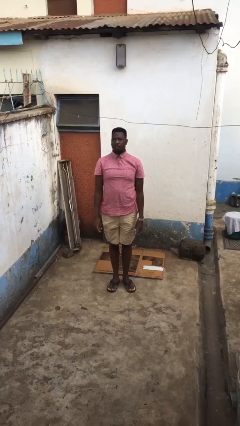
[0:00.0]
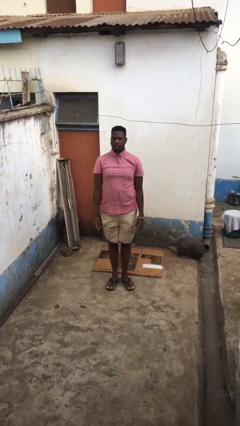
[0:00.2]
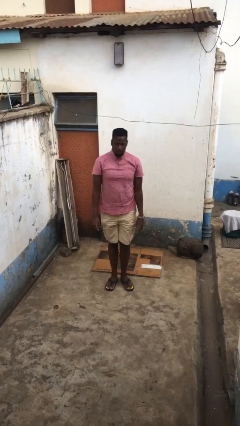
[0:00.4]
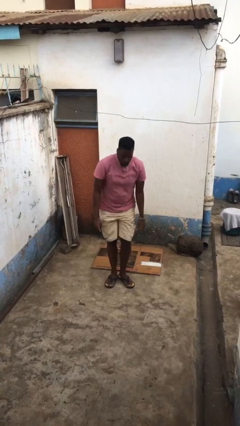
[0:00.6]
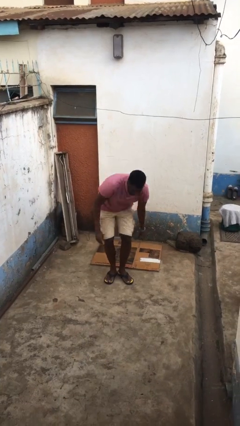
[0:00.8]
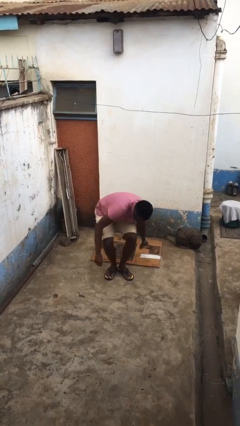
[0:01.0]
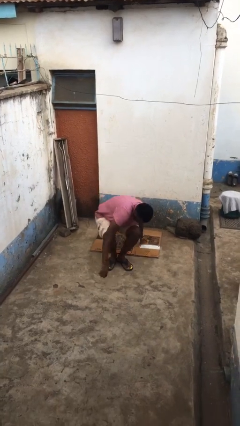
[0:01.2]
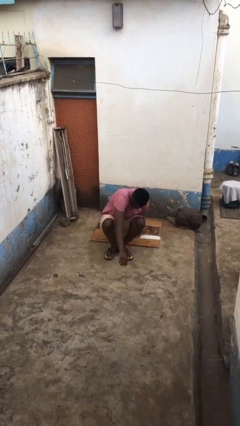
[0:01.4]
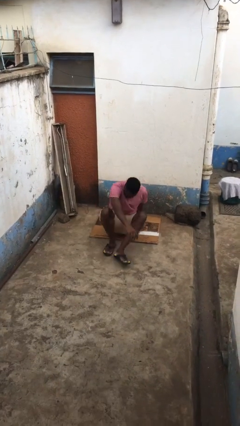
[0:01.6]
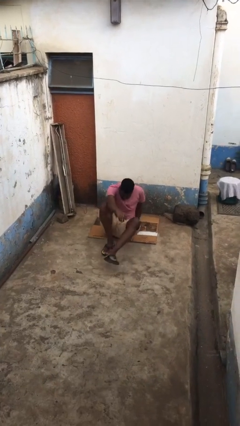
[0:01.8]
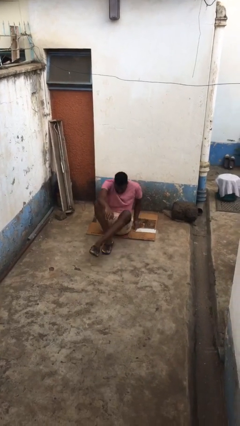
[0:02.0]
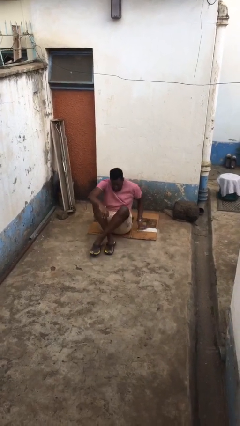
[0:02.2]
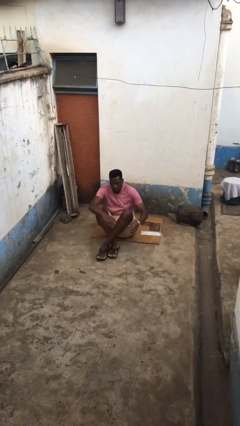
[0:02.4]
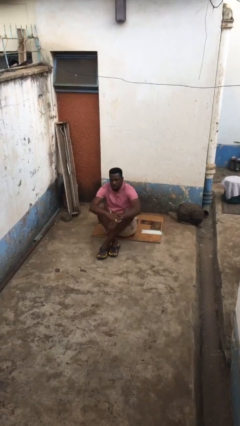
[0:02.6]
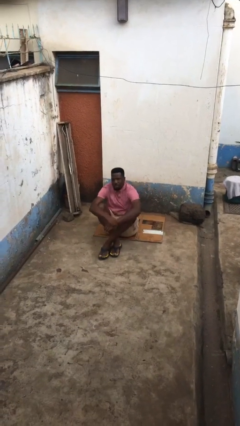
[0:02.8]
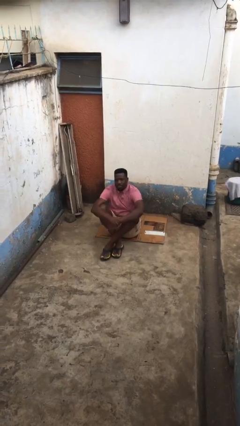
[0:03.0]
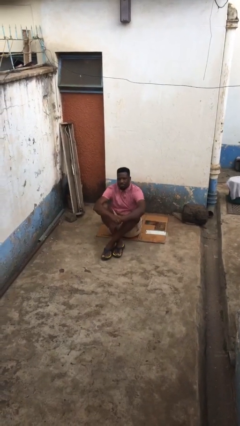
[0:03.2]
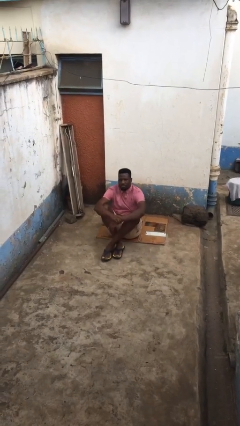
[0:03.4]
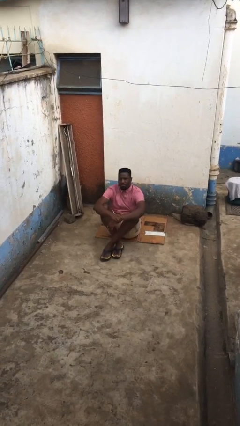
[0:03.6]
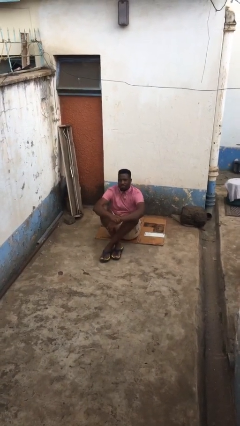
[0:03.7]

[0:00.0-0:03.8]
person sits crisscross

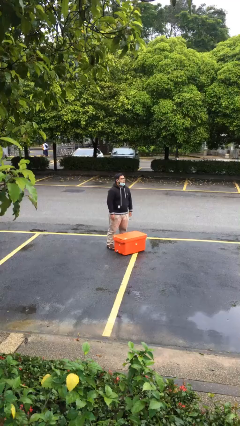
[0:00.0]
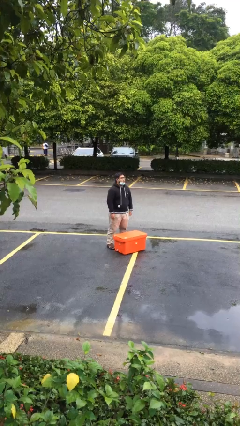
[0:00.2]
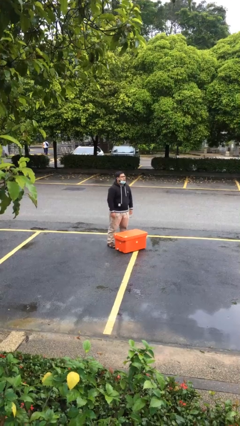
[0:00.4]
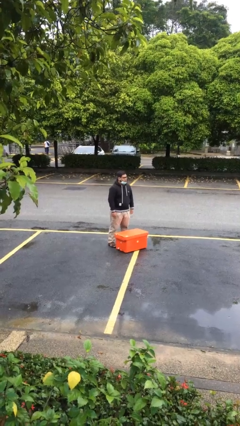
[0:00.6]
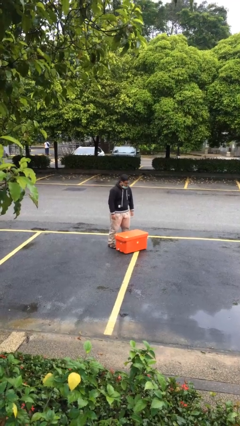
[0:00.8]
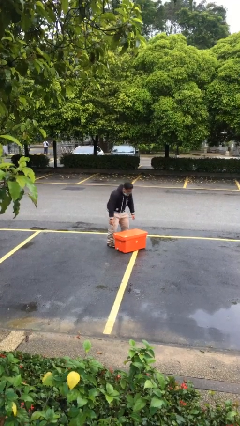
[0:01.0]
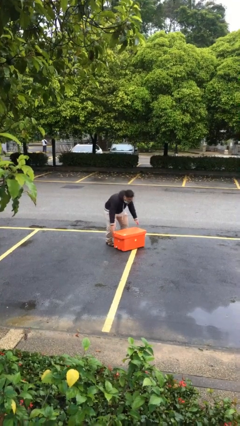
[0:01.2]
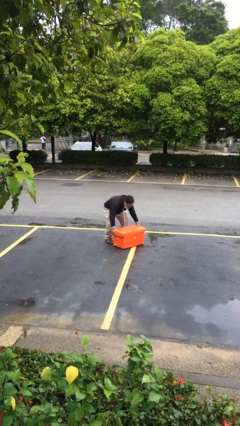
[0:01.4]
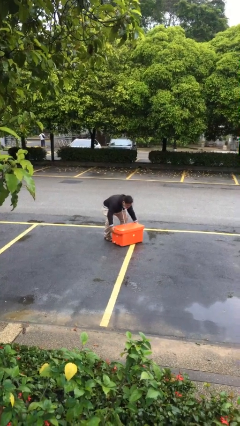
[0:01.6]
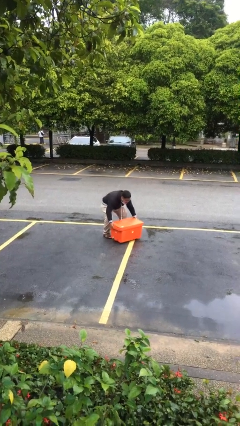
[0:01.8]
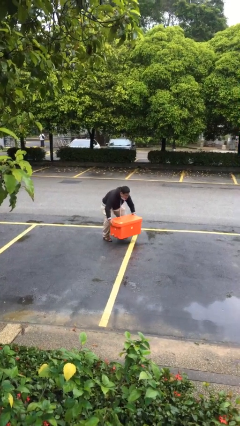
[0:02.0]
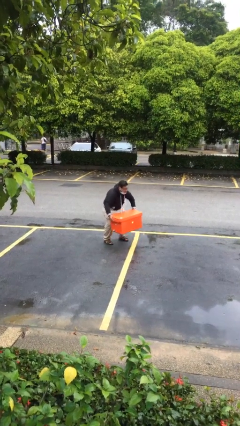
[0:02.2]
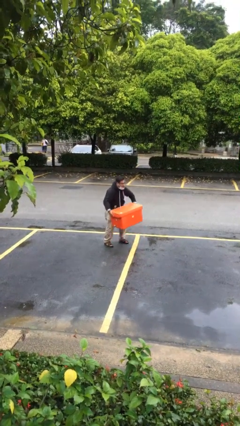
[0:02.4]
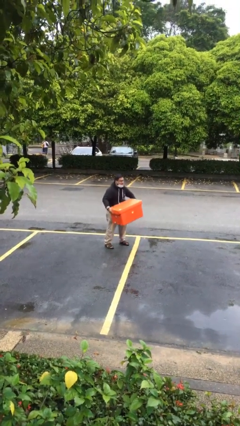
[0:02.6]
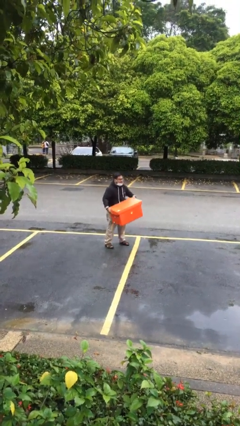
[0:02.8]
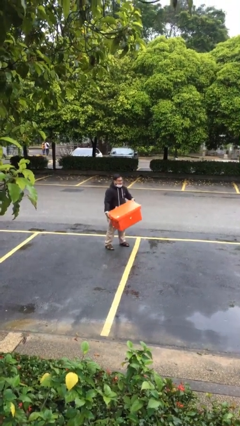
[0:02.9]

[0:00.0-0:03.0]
person picks up object from floor

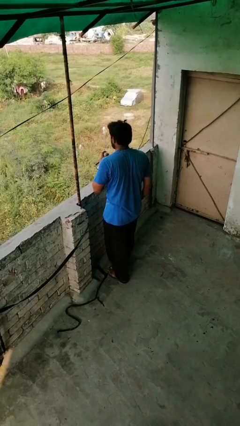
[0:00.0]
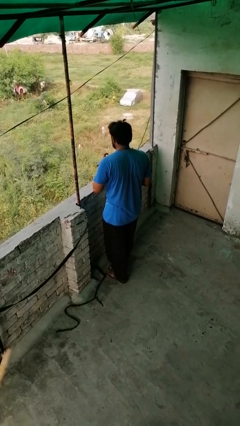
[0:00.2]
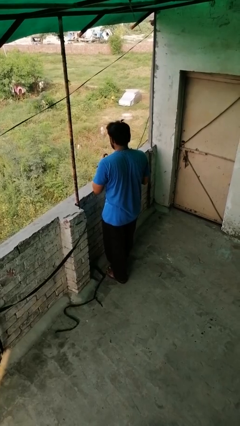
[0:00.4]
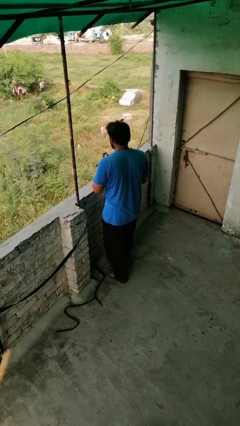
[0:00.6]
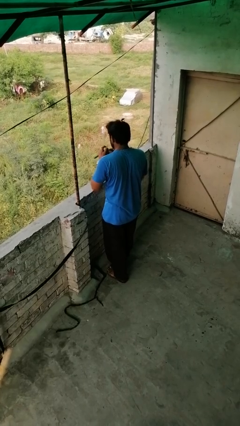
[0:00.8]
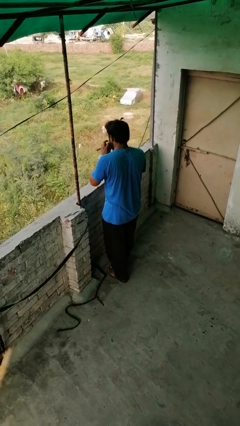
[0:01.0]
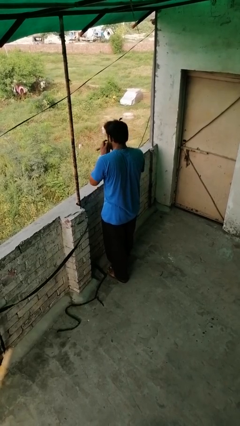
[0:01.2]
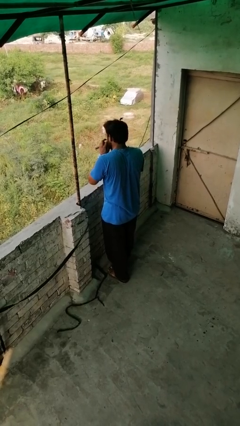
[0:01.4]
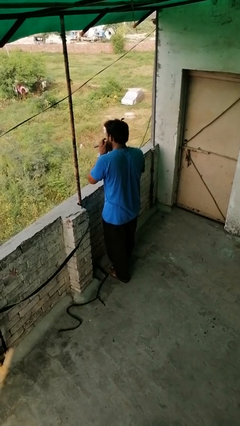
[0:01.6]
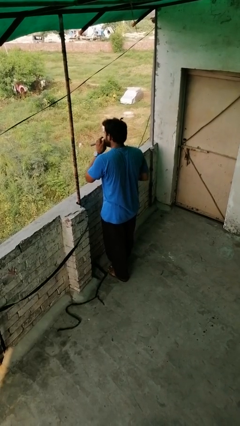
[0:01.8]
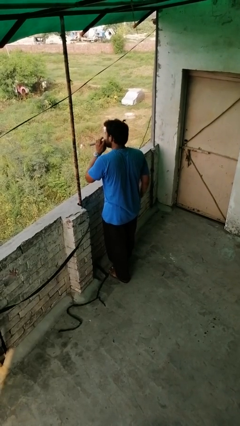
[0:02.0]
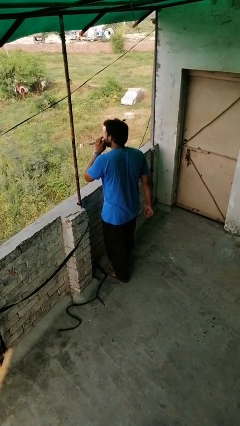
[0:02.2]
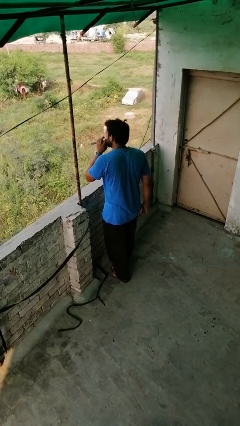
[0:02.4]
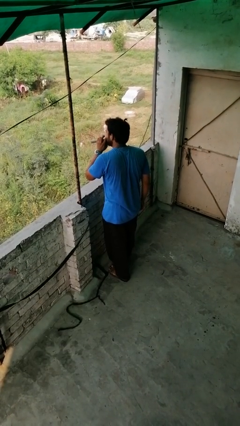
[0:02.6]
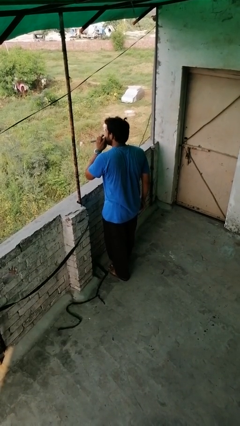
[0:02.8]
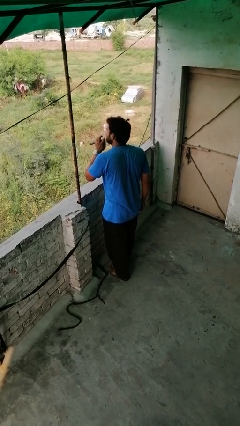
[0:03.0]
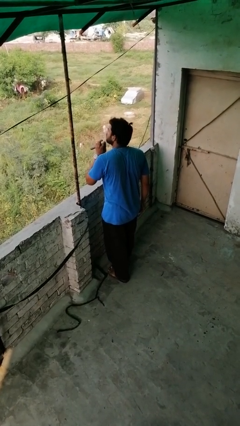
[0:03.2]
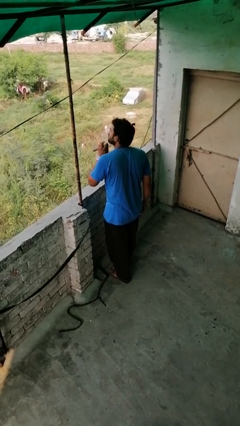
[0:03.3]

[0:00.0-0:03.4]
person vapes

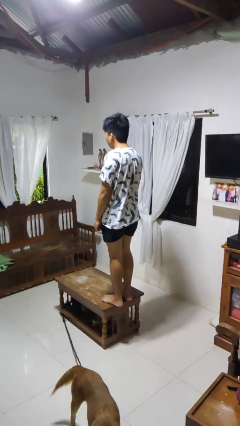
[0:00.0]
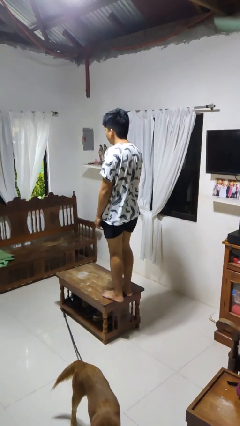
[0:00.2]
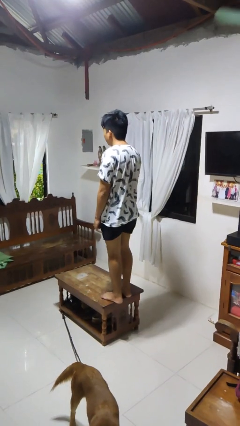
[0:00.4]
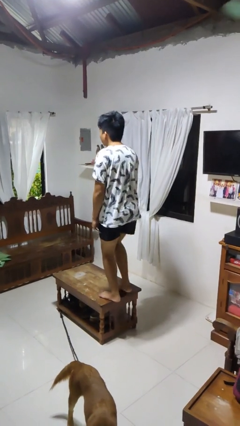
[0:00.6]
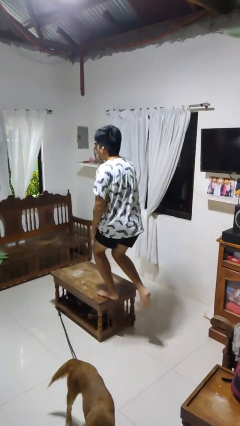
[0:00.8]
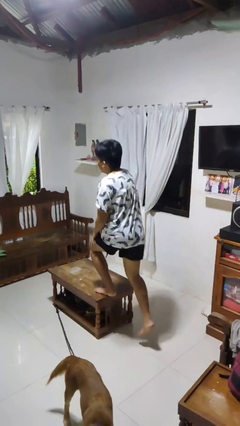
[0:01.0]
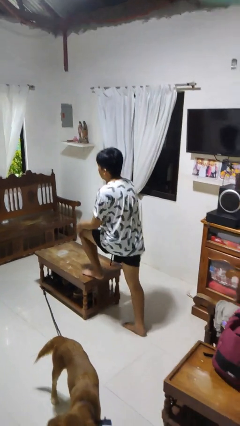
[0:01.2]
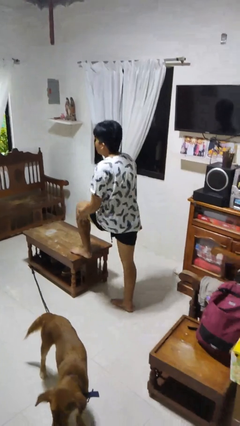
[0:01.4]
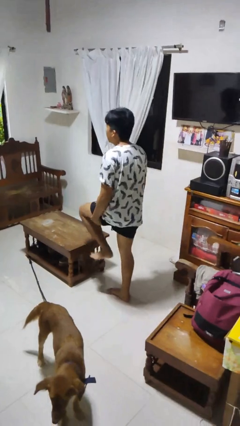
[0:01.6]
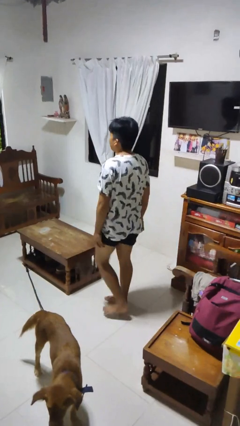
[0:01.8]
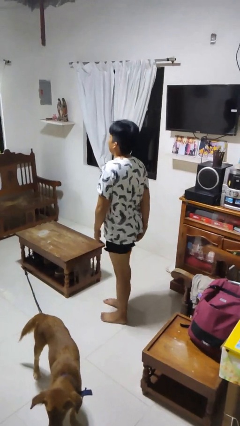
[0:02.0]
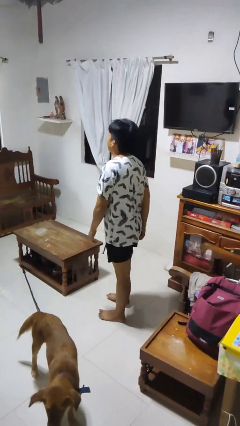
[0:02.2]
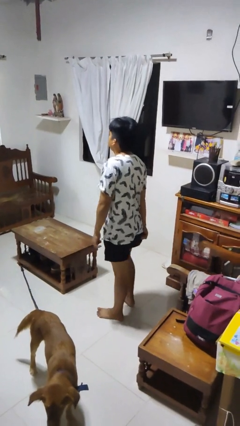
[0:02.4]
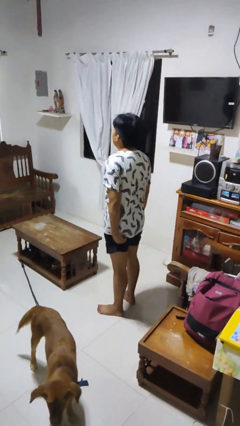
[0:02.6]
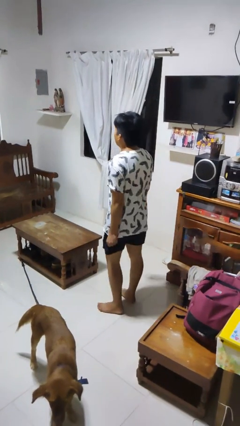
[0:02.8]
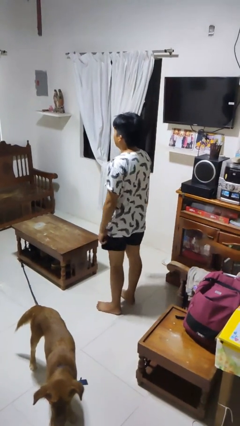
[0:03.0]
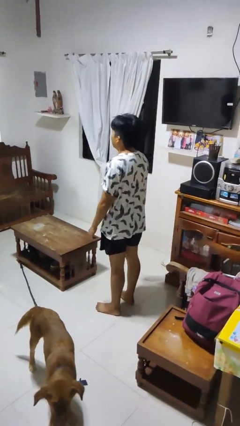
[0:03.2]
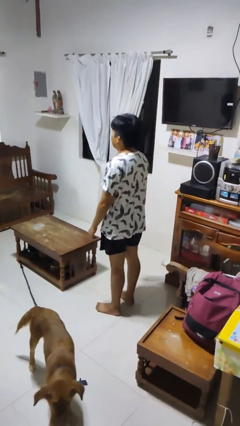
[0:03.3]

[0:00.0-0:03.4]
person climbs off table

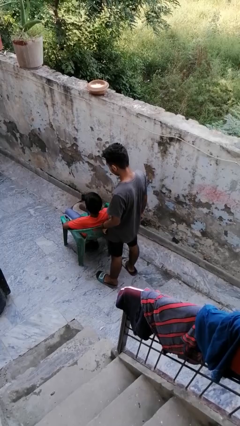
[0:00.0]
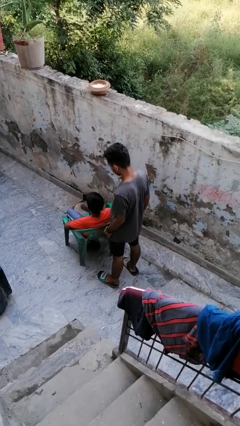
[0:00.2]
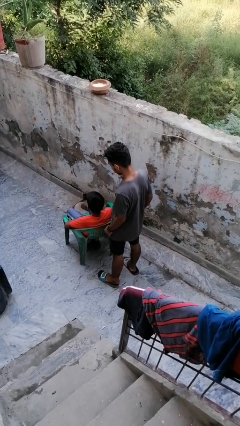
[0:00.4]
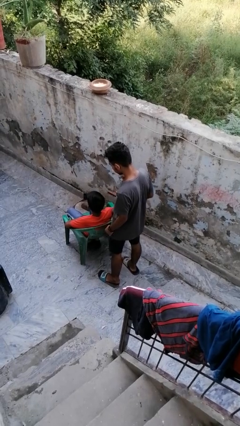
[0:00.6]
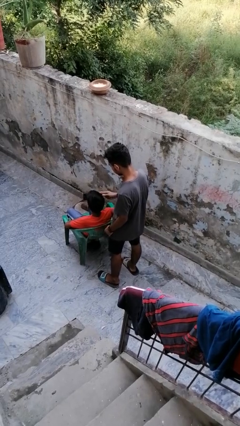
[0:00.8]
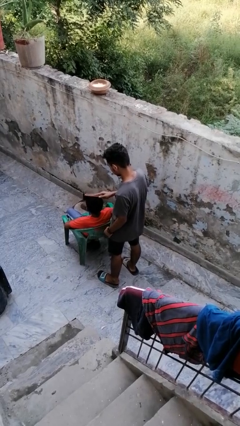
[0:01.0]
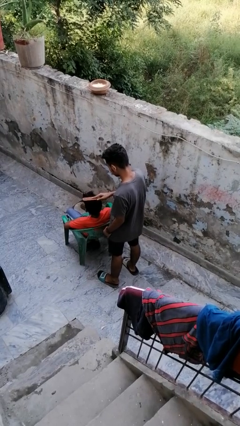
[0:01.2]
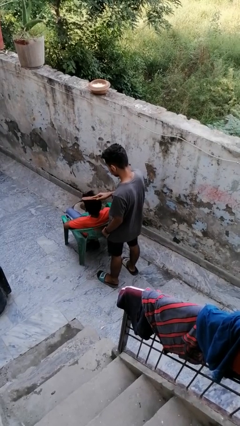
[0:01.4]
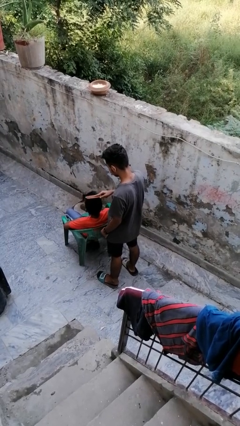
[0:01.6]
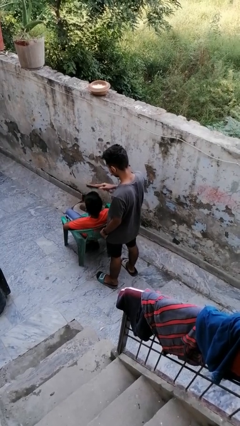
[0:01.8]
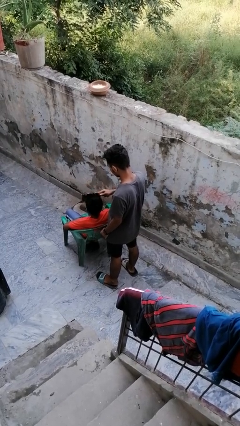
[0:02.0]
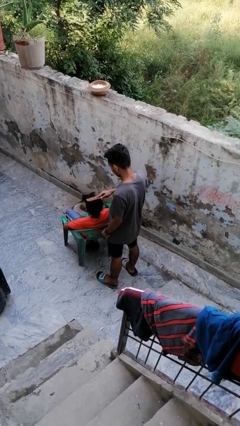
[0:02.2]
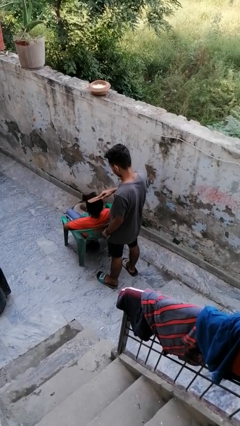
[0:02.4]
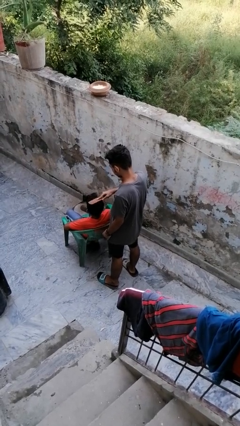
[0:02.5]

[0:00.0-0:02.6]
person brushes hair of person

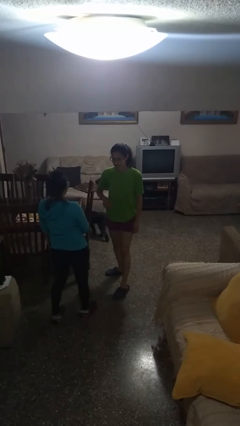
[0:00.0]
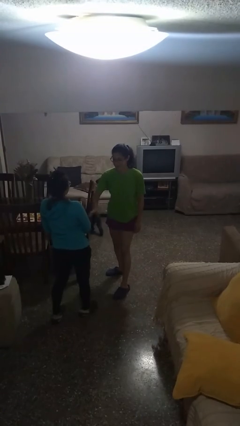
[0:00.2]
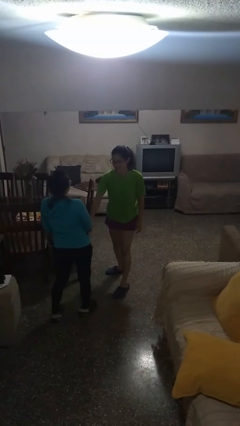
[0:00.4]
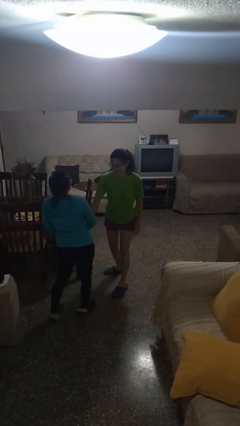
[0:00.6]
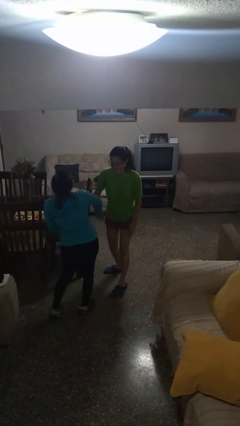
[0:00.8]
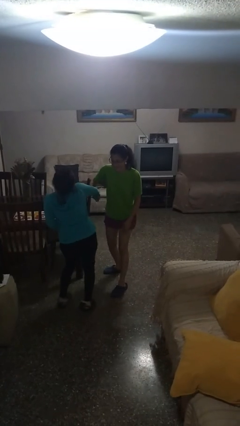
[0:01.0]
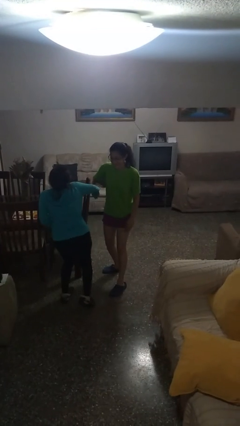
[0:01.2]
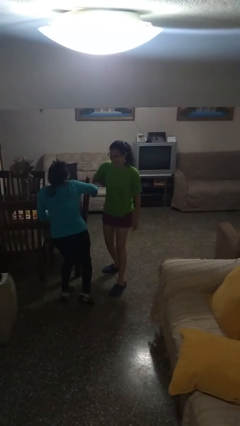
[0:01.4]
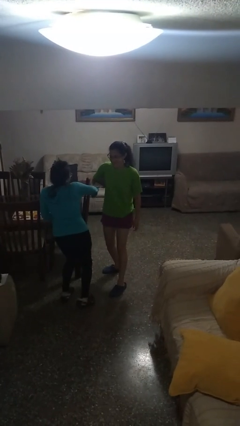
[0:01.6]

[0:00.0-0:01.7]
person grabs person by forearm
